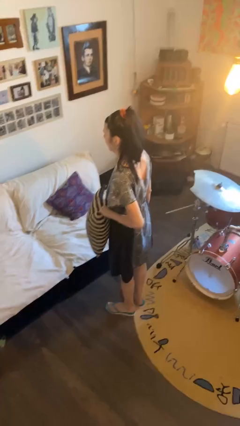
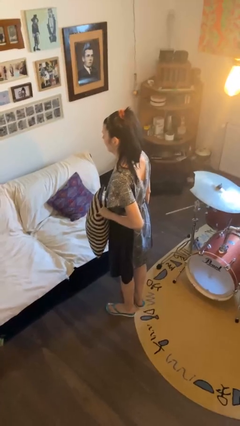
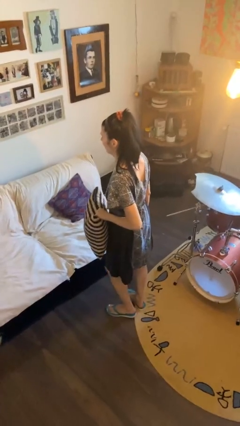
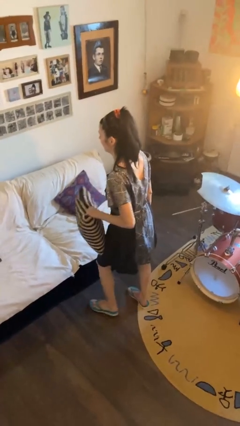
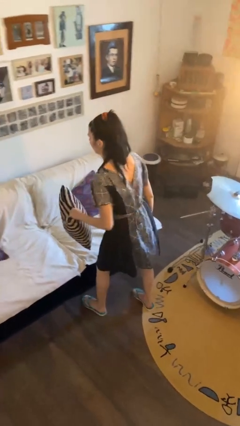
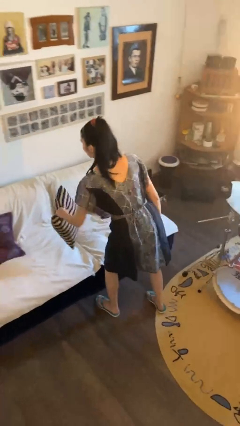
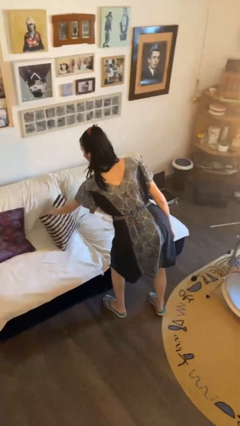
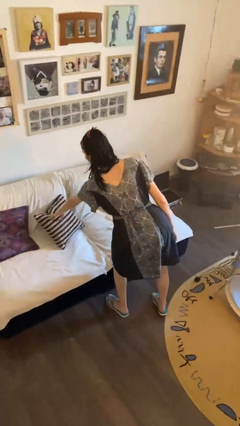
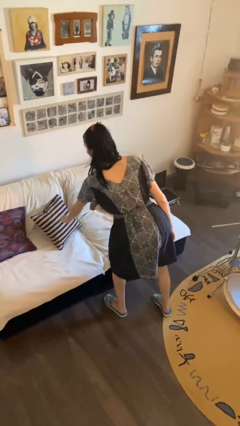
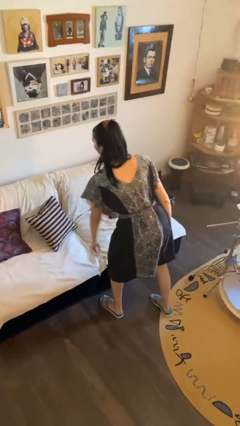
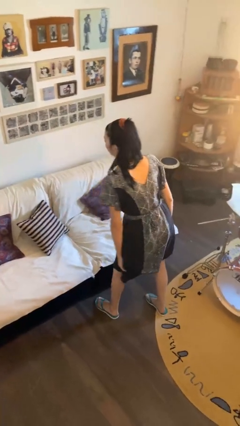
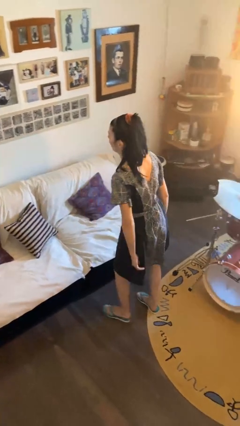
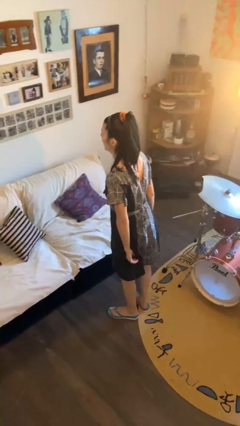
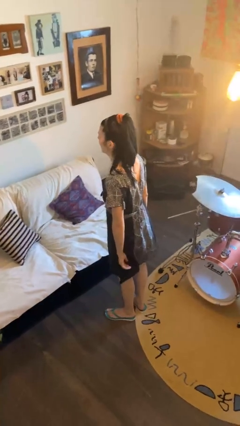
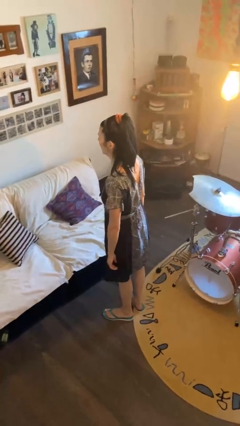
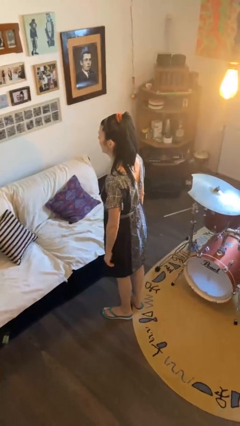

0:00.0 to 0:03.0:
person puts down object on couch

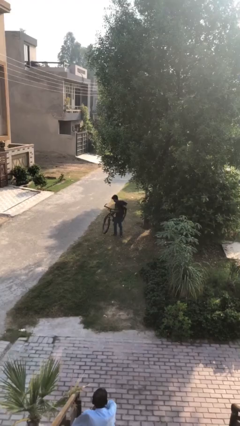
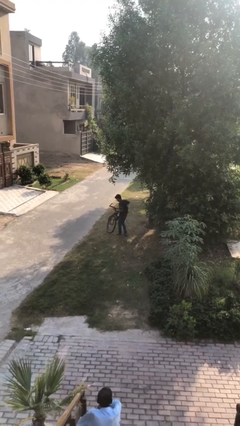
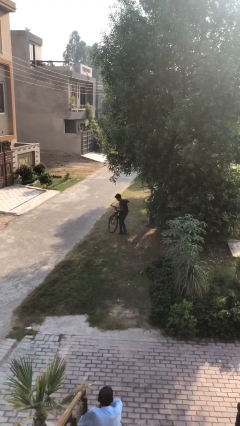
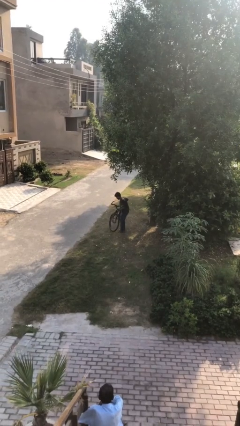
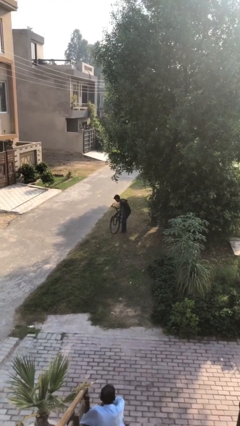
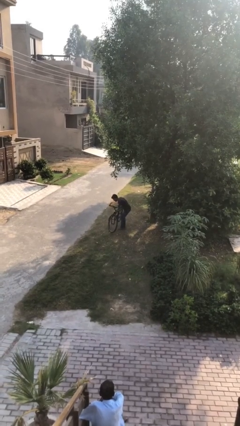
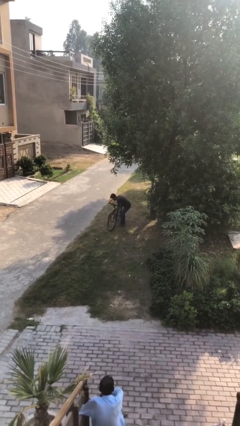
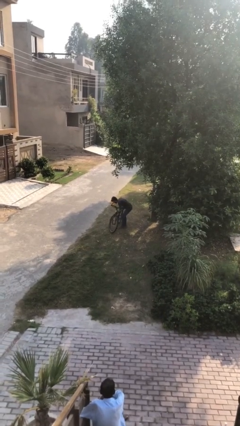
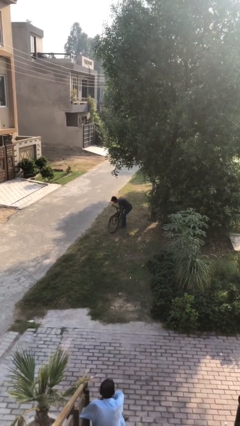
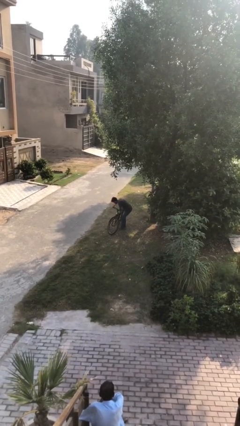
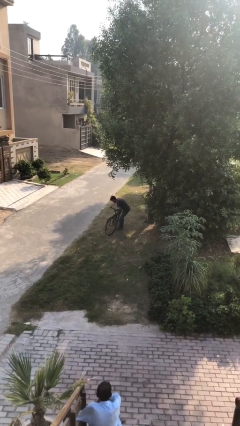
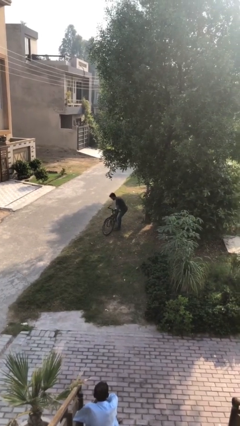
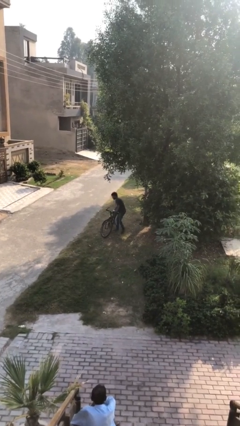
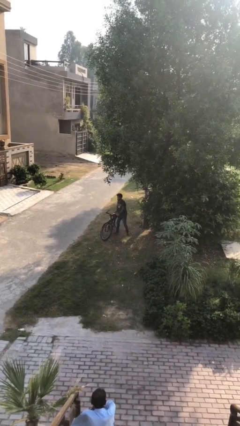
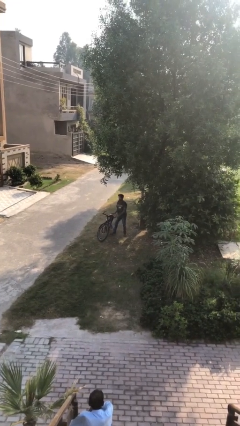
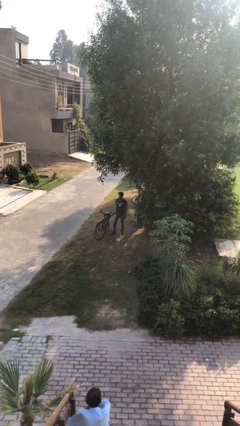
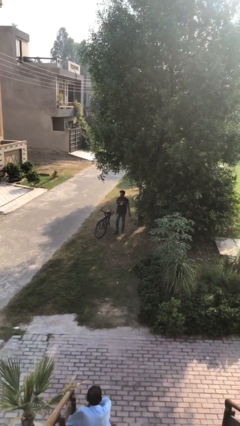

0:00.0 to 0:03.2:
person puts down object on floor

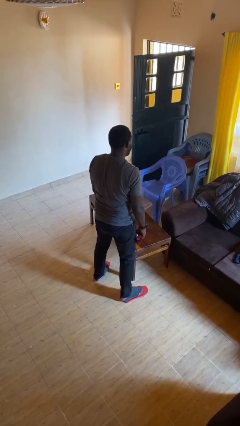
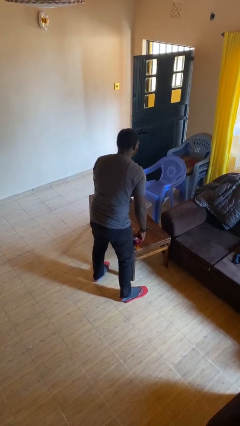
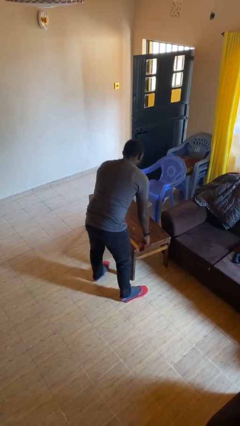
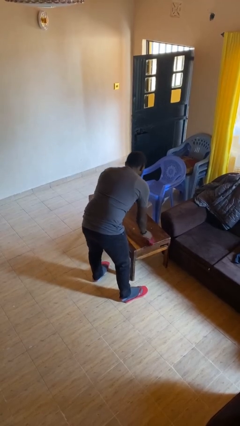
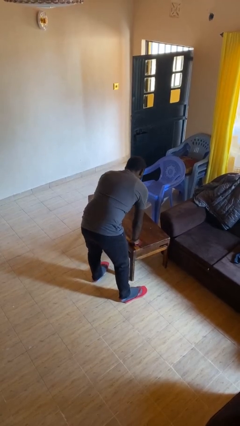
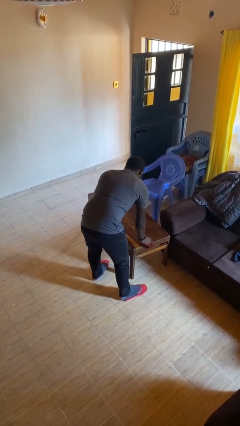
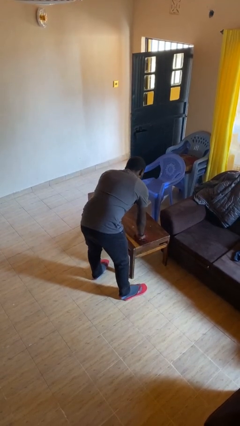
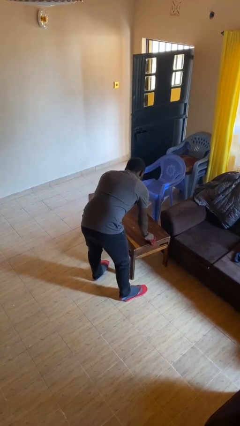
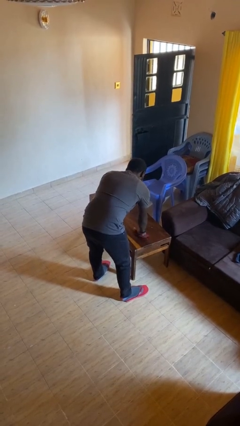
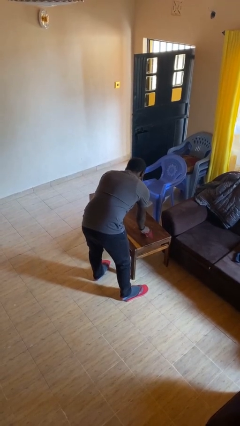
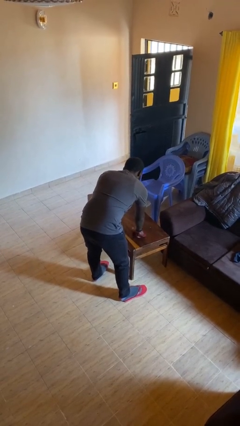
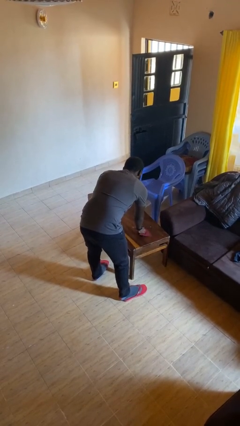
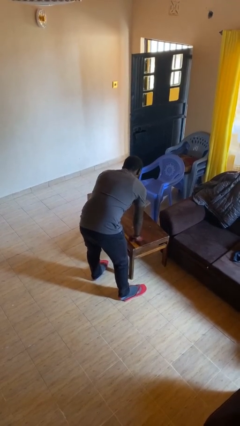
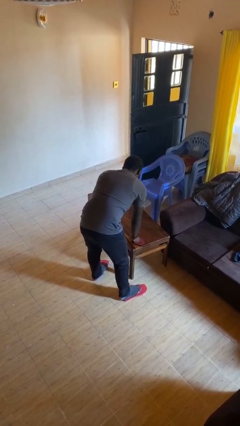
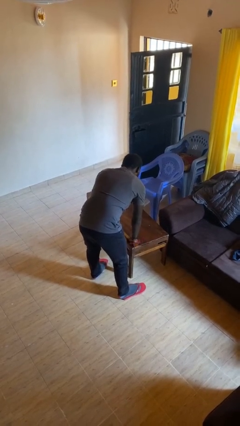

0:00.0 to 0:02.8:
person cleans table with rag

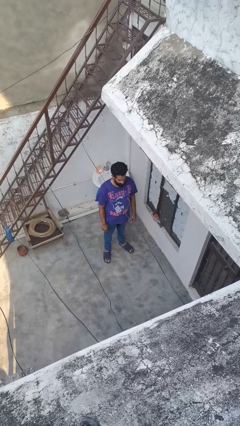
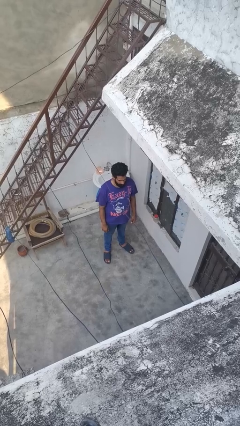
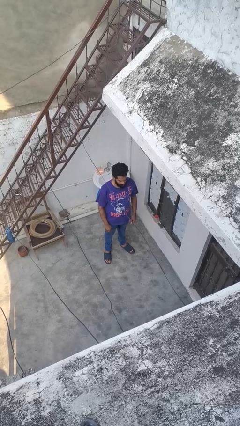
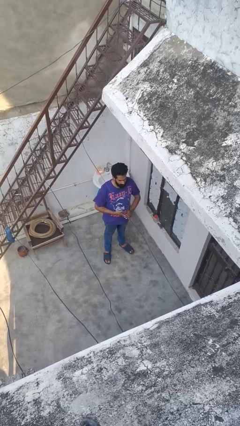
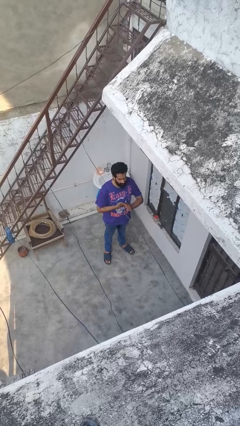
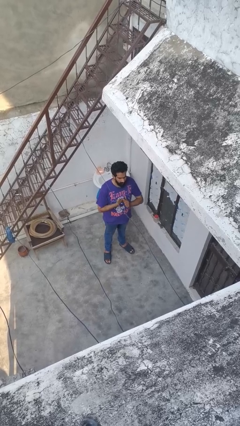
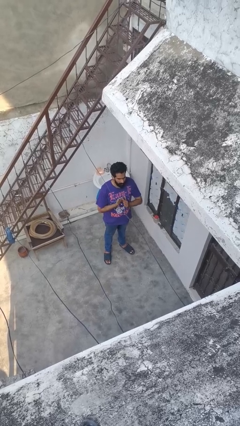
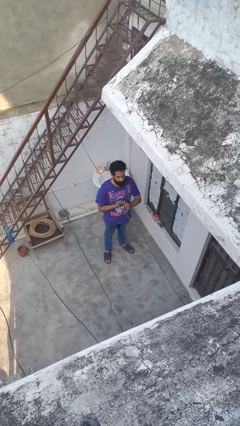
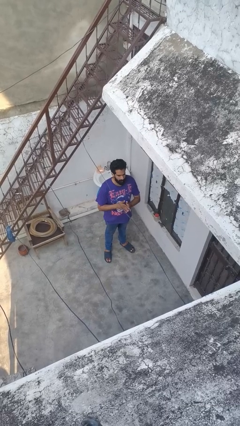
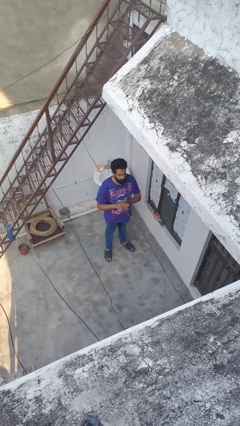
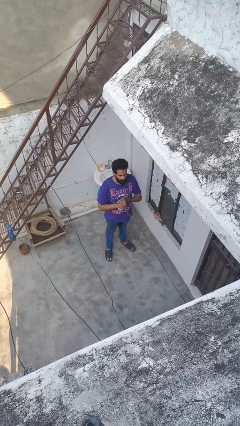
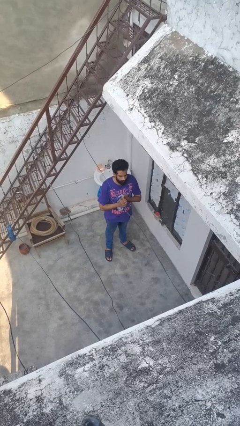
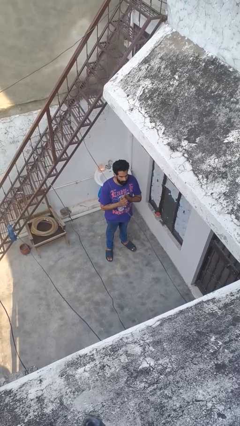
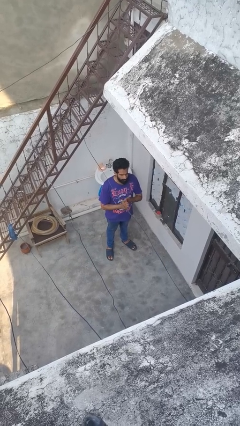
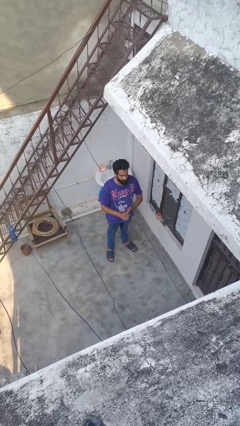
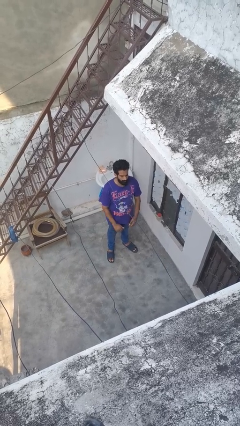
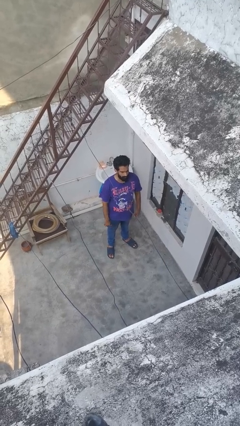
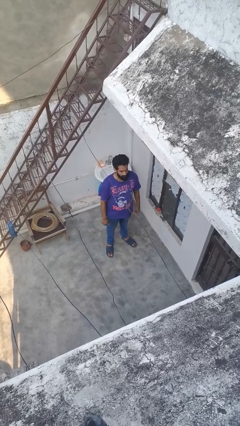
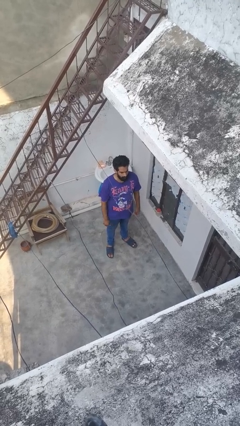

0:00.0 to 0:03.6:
person cracks knuckles

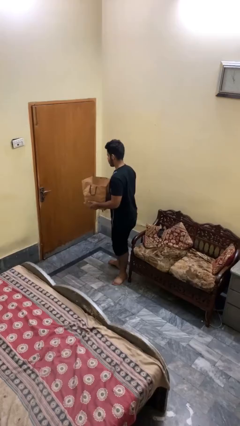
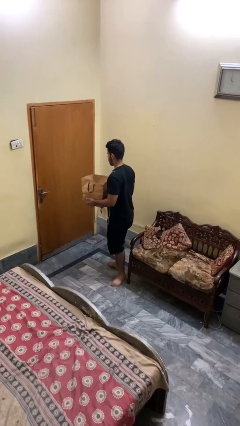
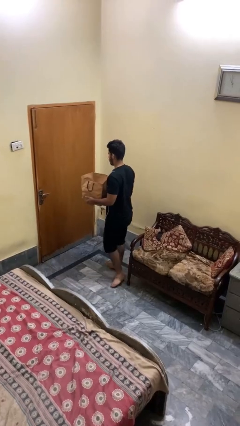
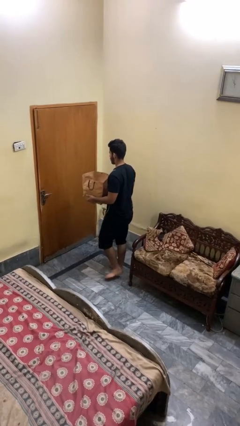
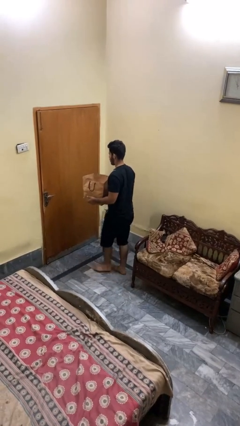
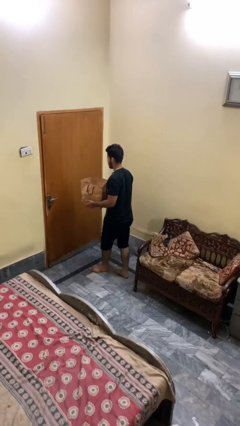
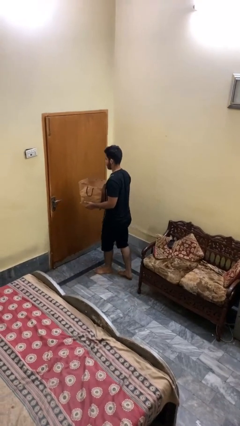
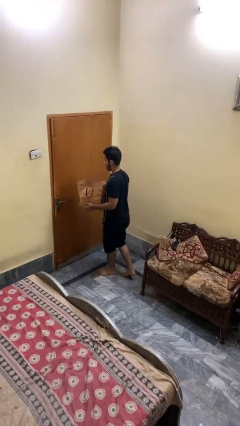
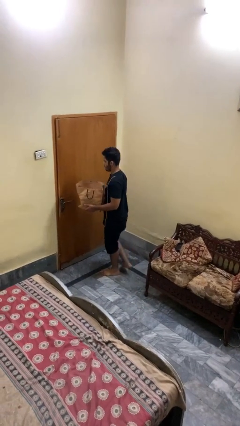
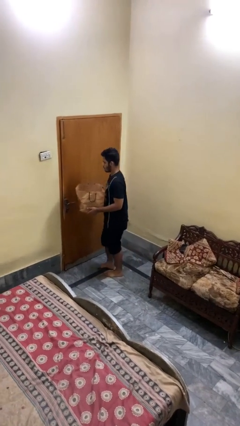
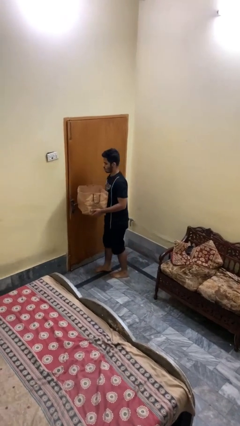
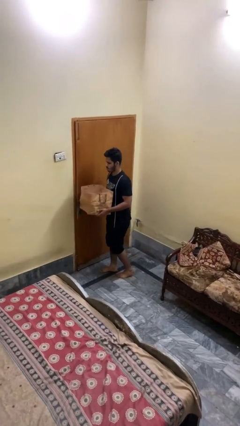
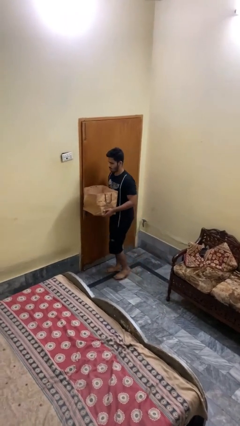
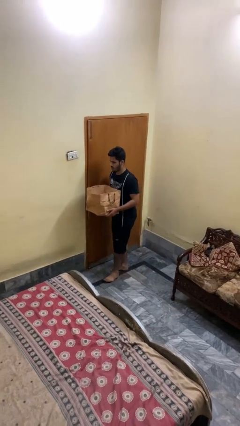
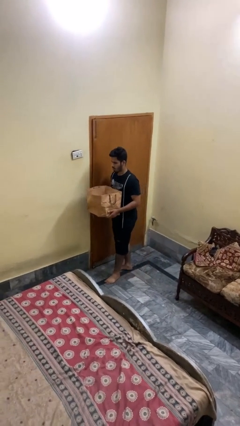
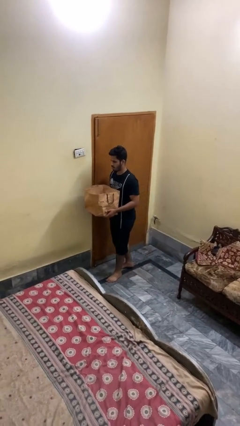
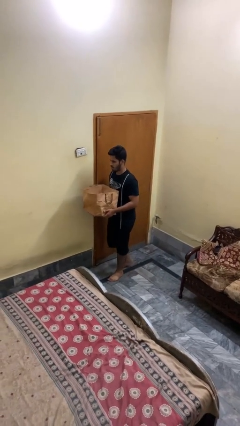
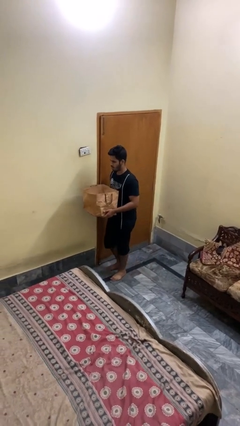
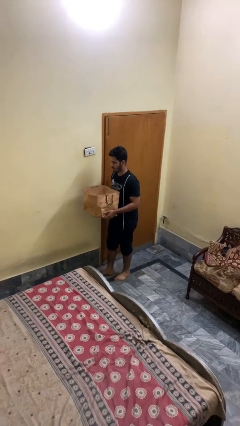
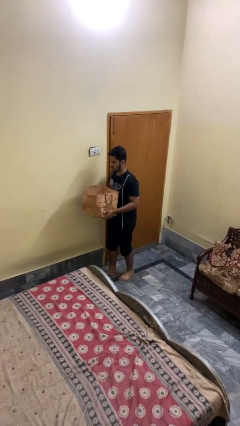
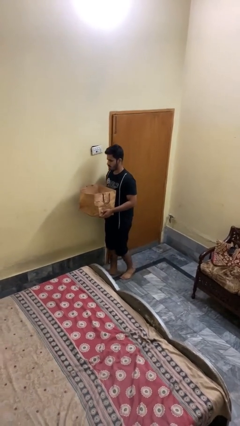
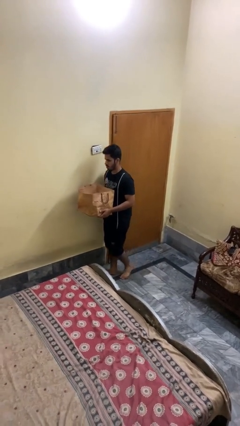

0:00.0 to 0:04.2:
person carries groceries

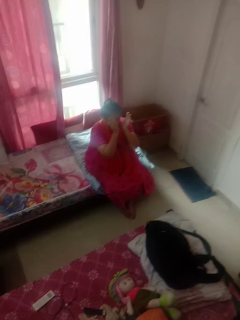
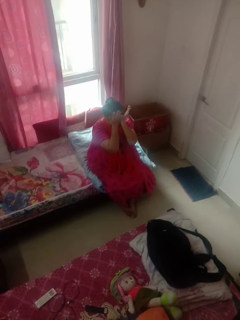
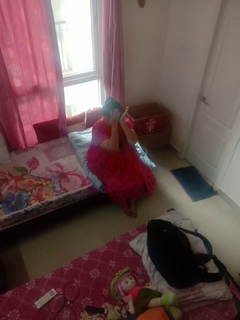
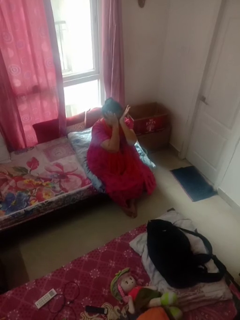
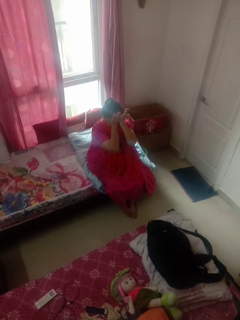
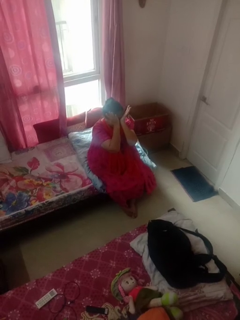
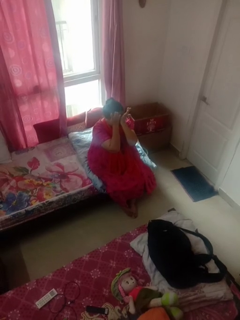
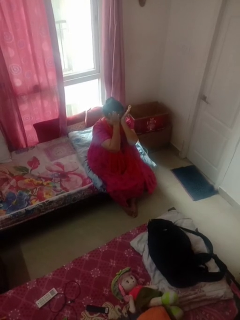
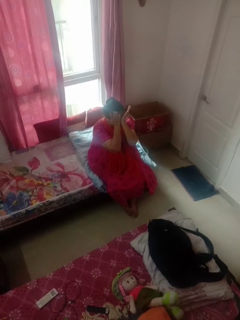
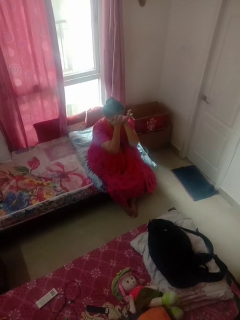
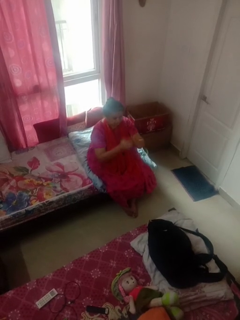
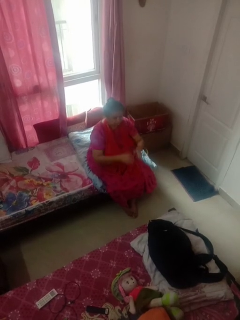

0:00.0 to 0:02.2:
person rubs eyes
